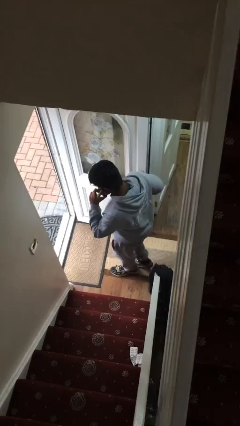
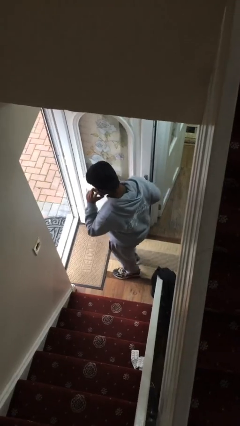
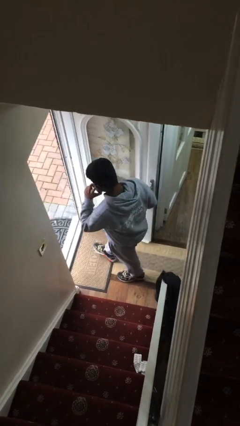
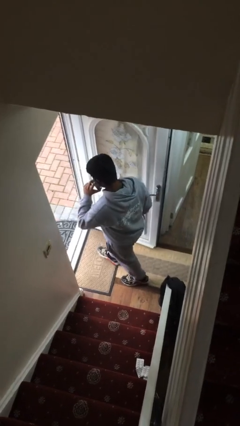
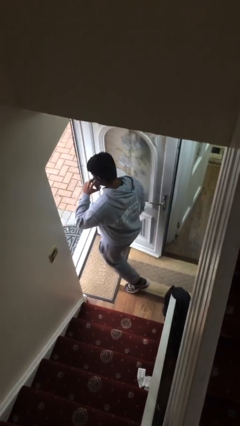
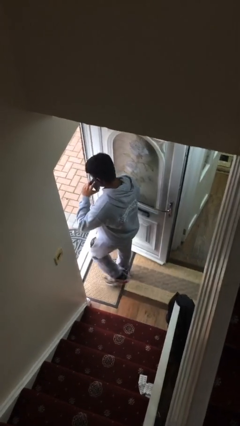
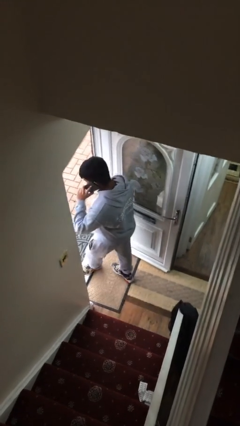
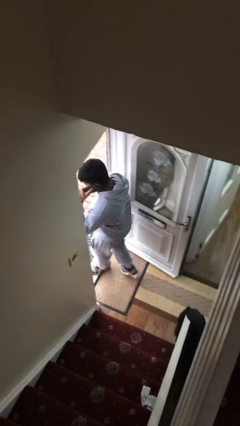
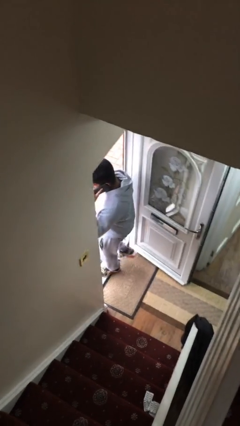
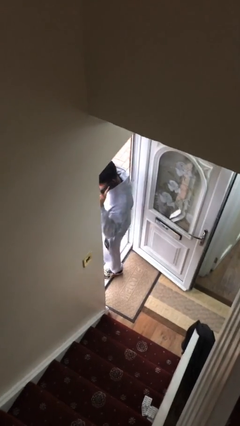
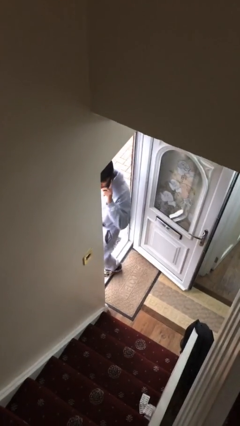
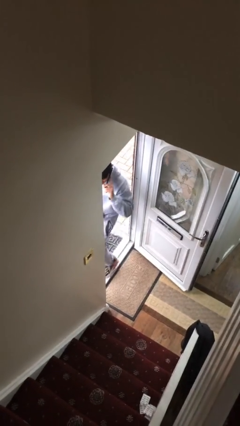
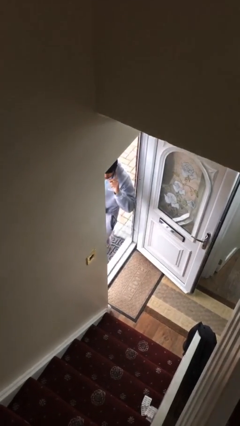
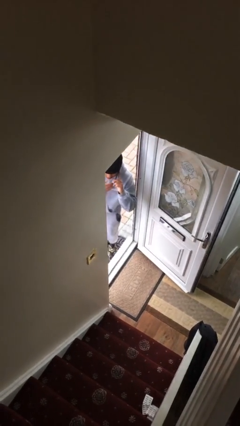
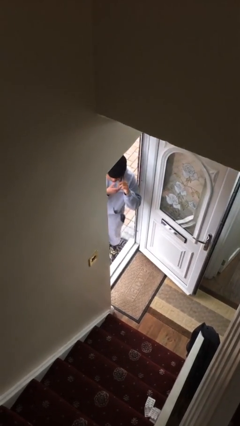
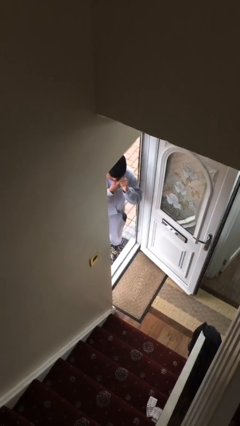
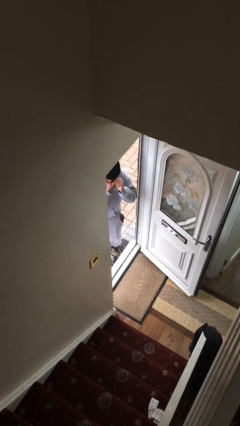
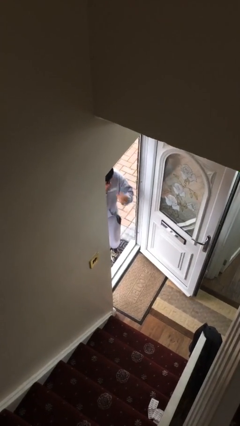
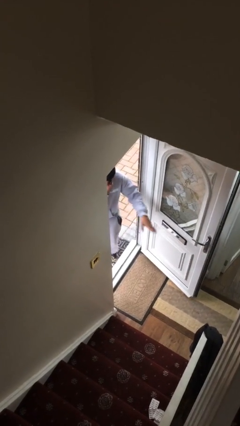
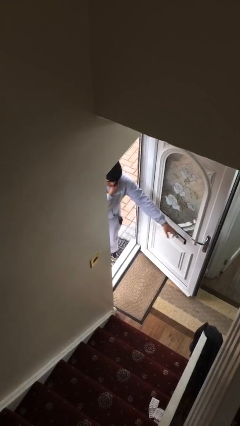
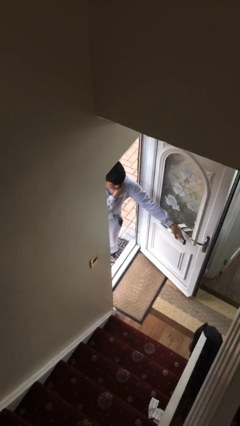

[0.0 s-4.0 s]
person exits scene through structure

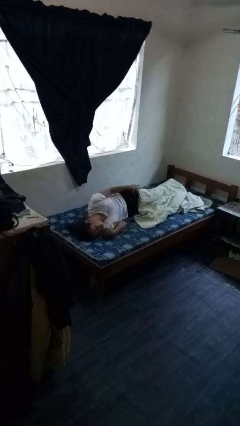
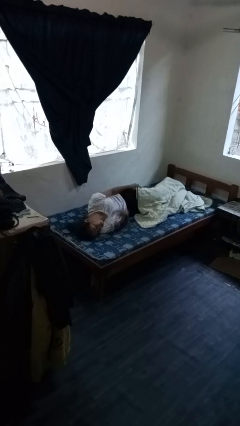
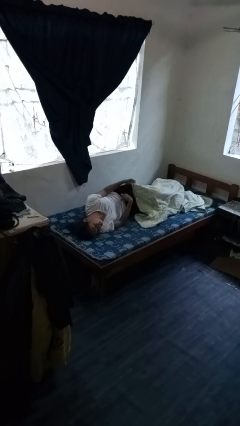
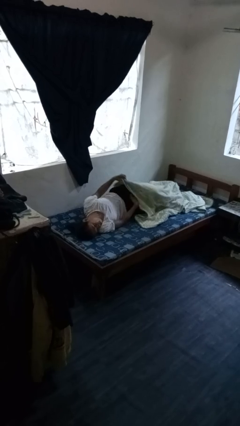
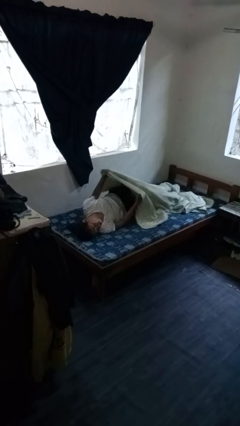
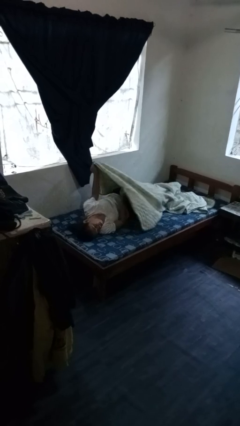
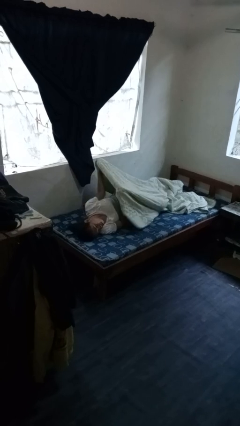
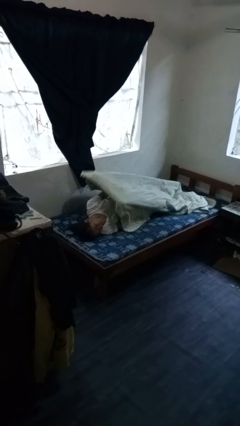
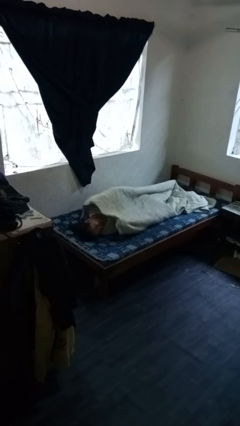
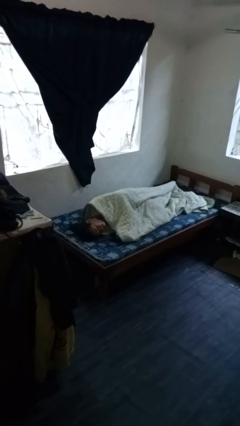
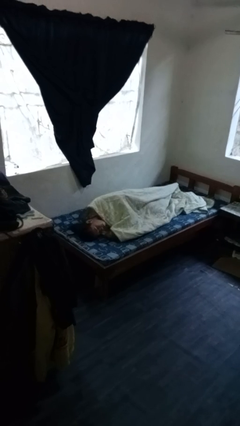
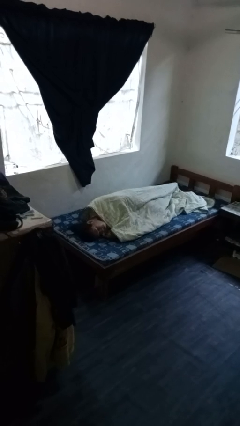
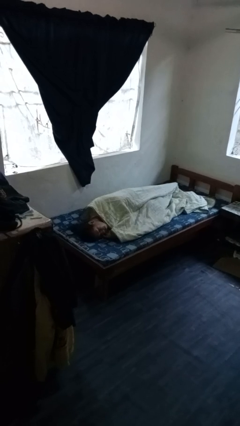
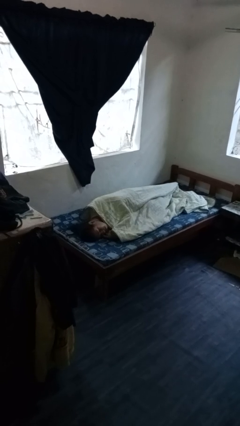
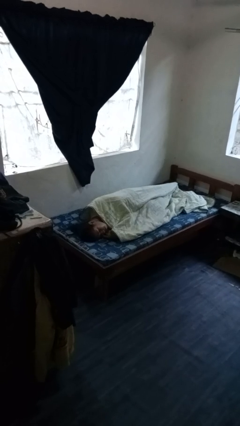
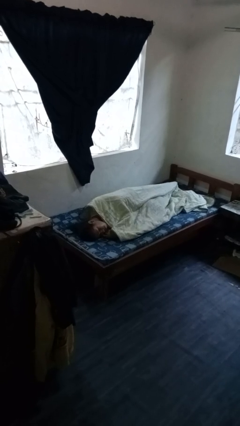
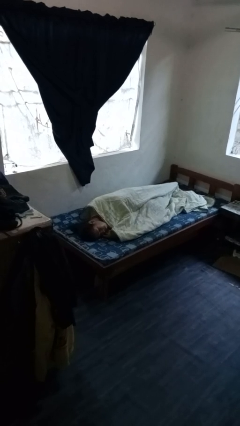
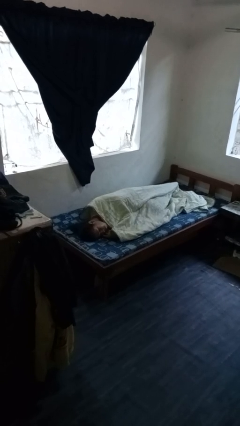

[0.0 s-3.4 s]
person covers with bedsheets

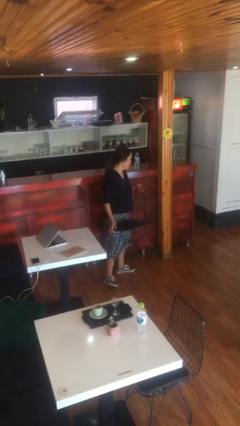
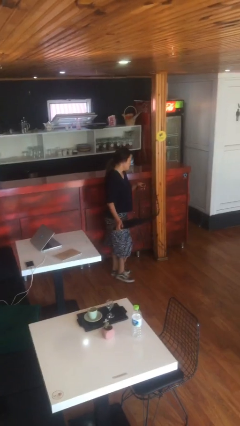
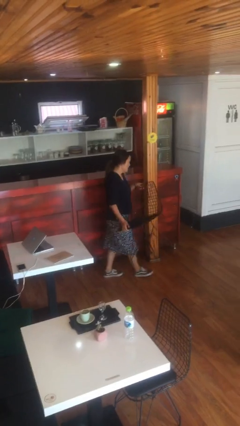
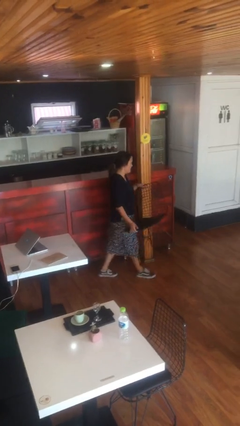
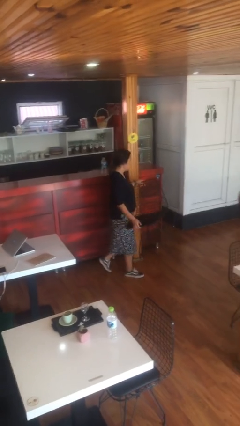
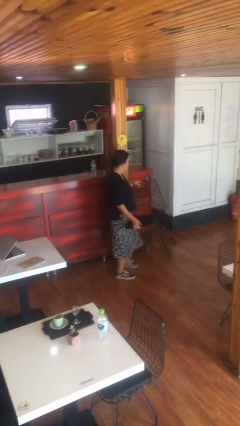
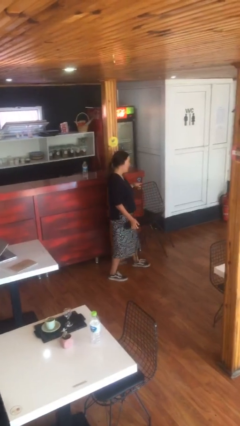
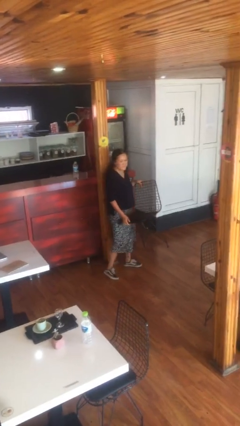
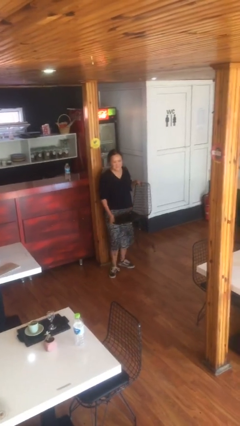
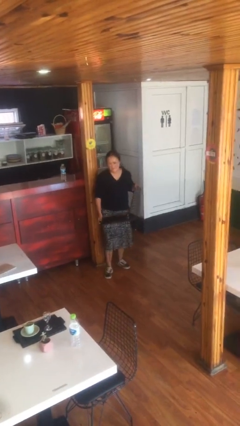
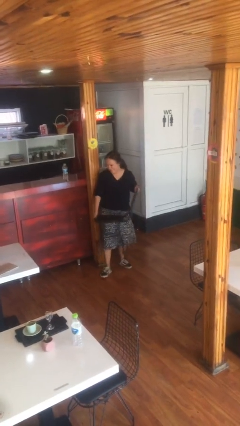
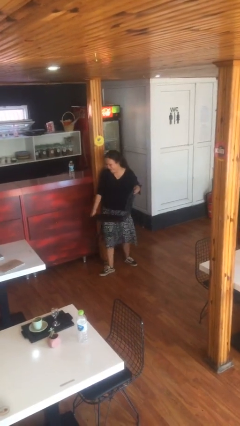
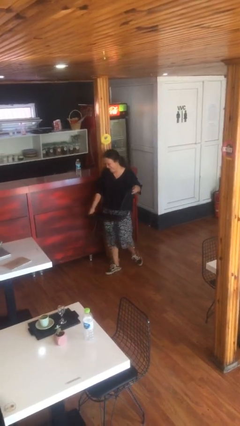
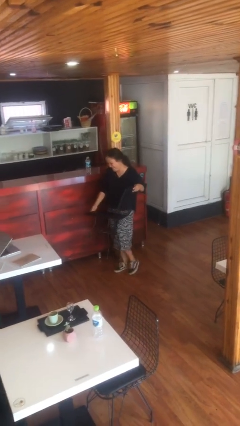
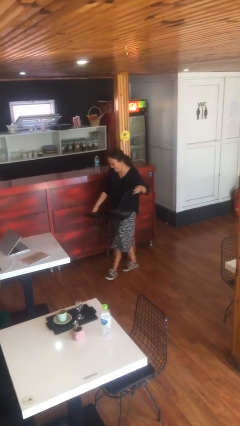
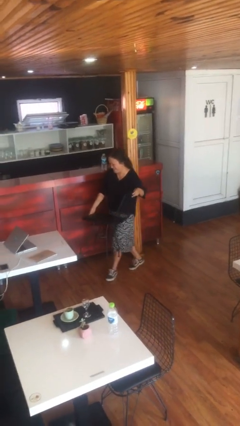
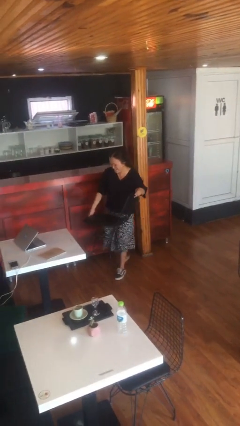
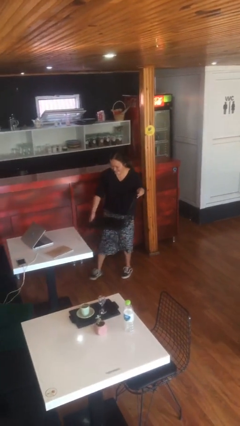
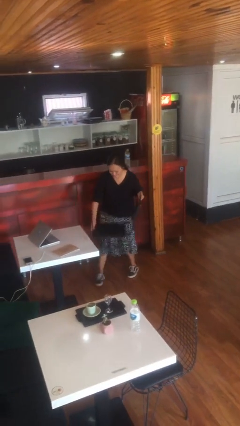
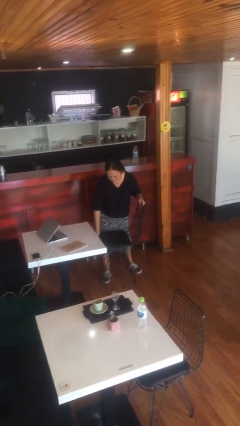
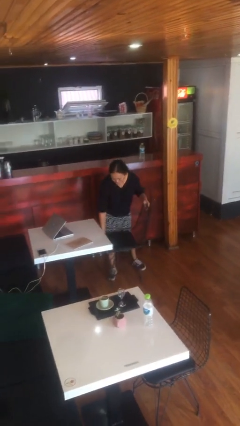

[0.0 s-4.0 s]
person carries heavy object

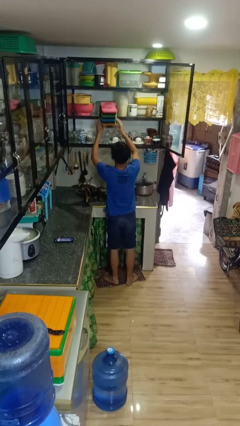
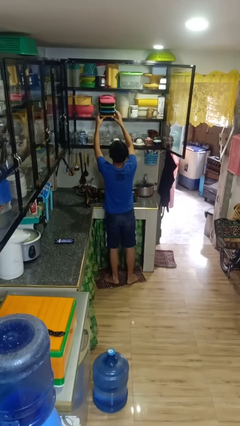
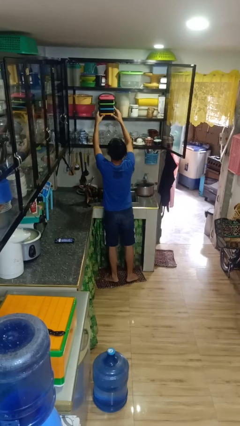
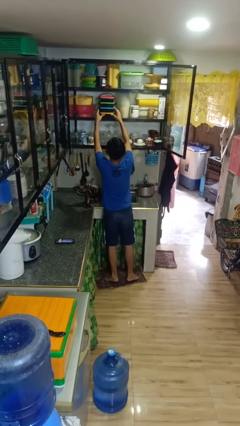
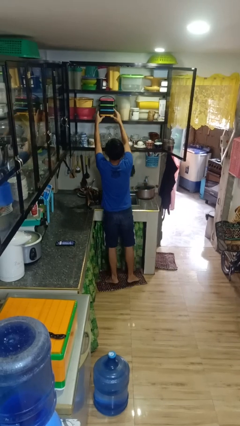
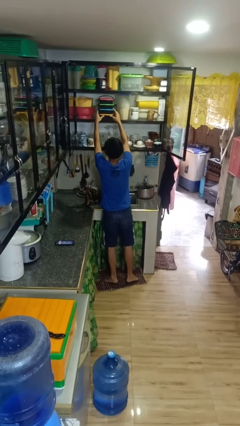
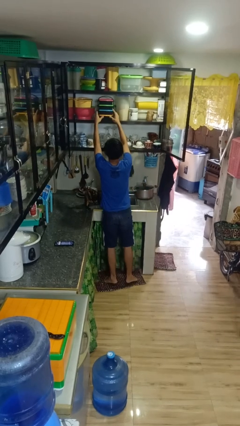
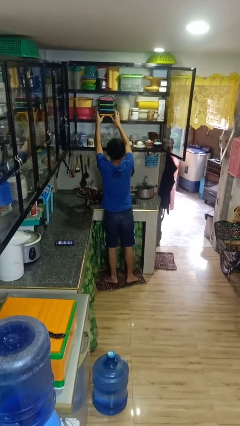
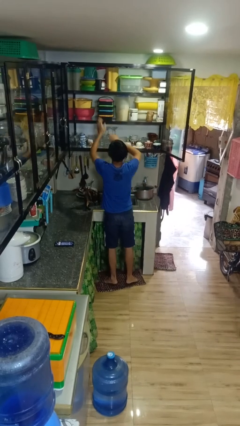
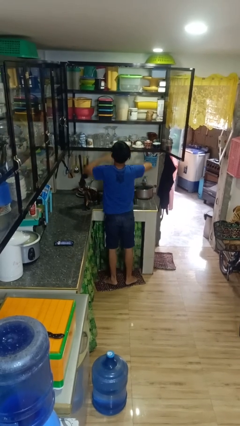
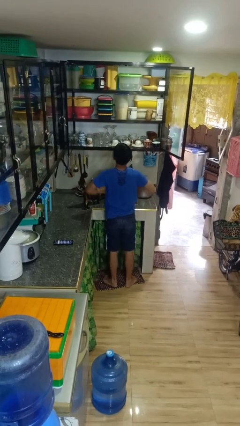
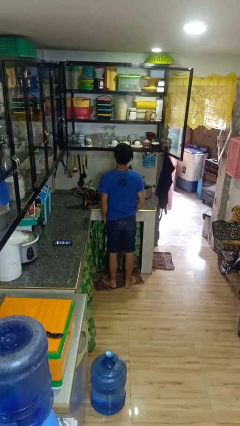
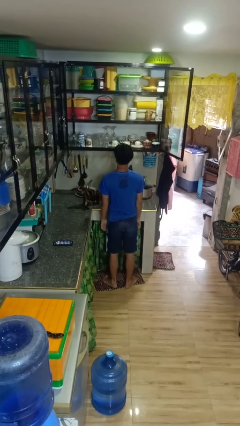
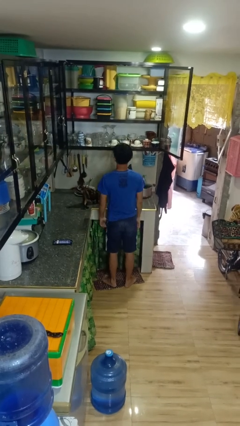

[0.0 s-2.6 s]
person puts down object into cabinet

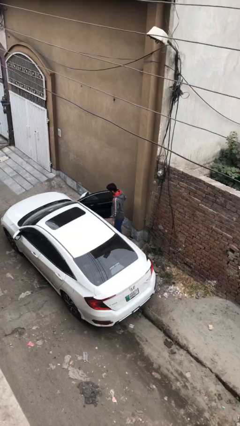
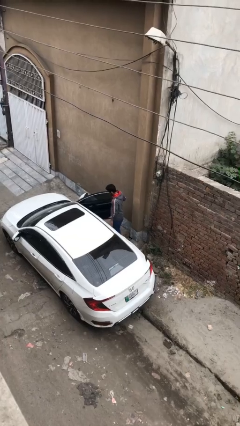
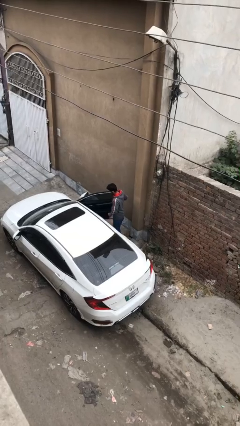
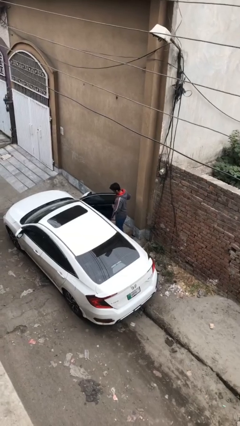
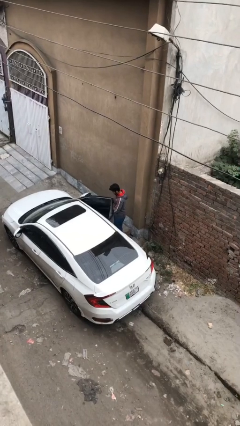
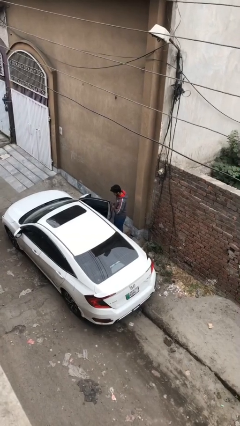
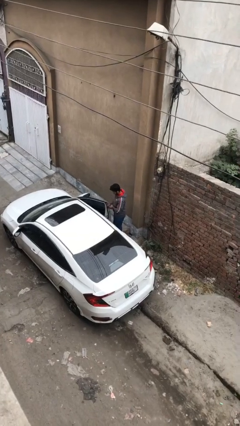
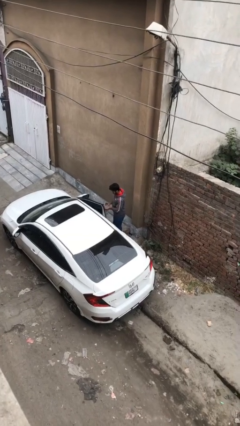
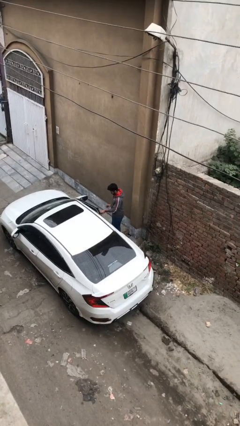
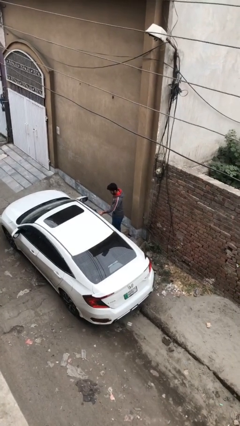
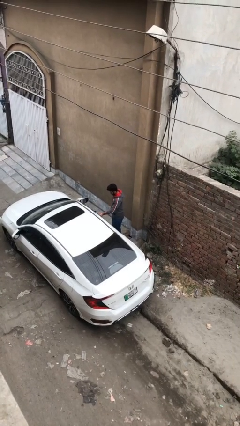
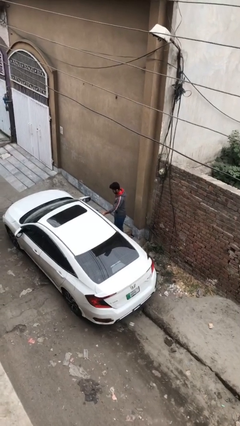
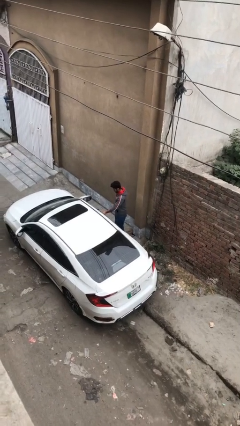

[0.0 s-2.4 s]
person closes car door

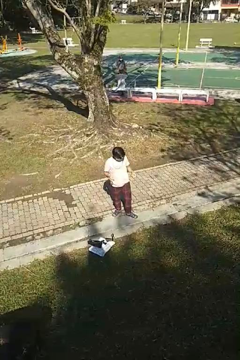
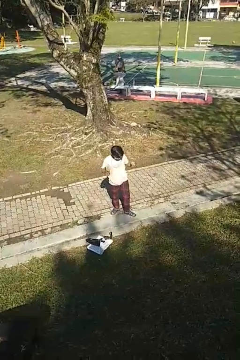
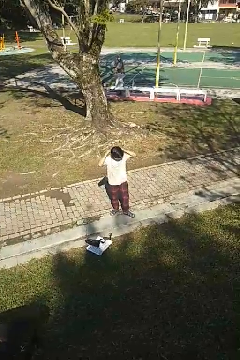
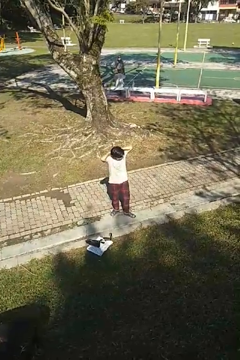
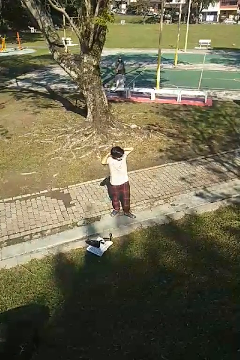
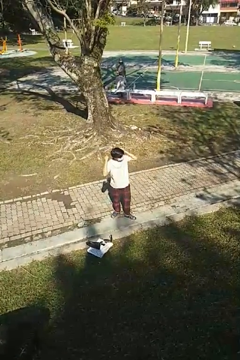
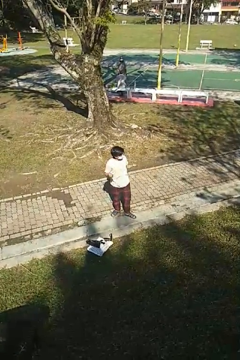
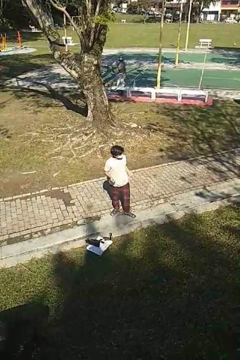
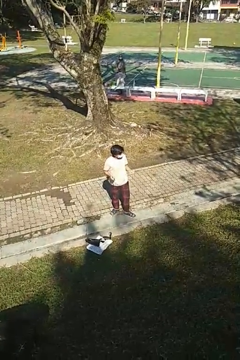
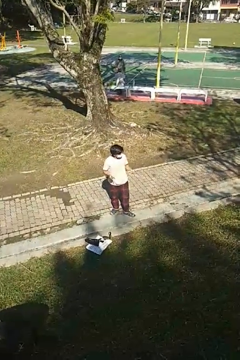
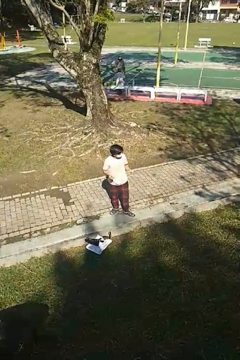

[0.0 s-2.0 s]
person takes off necklace
